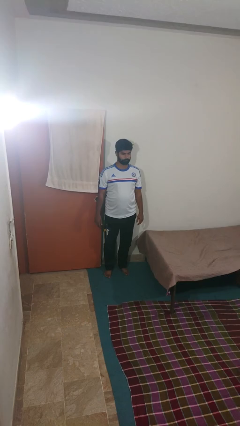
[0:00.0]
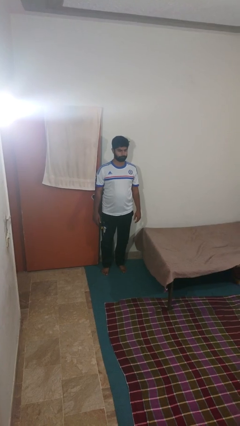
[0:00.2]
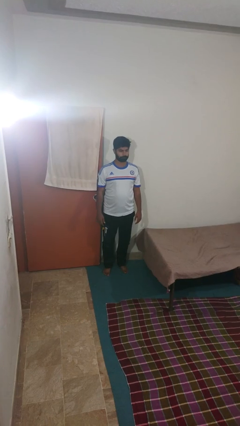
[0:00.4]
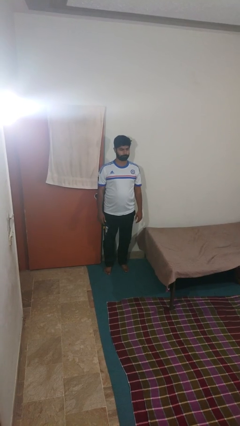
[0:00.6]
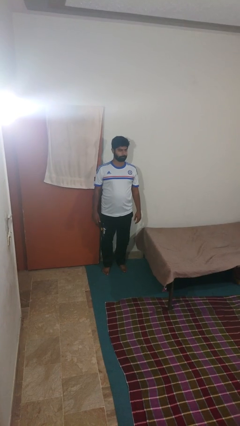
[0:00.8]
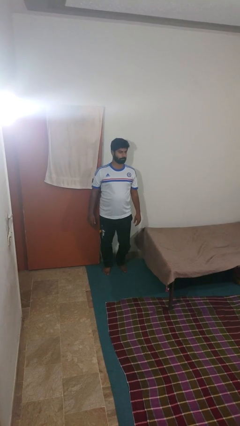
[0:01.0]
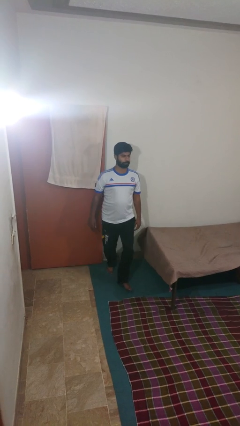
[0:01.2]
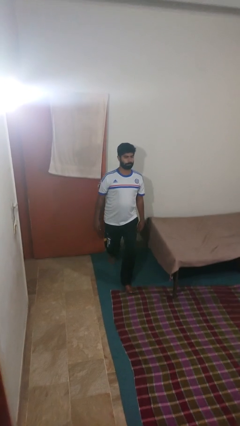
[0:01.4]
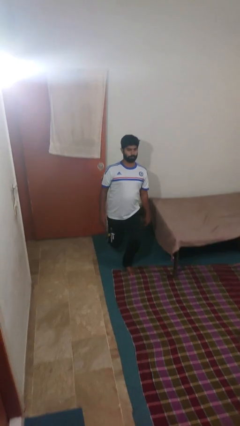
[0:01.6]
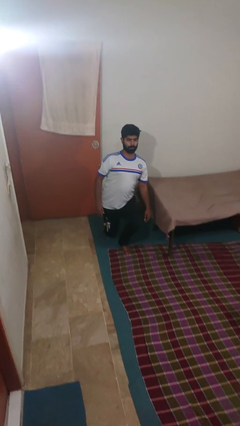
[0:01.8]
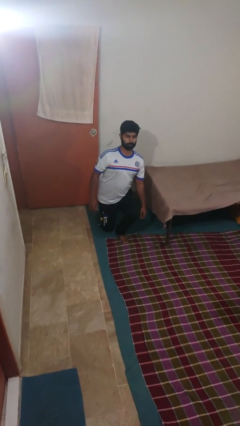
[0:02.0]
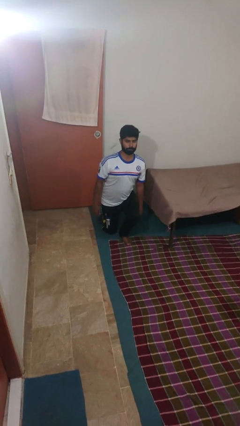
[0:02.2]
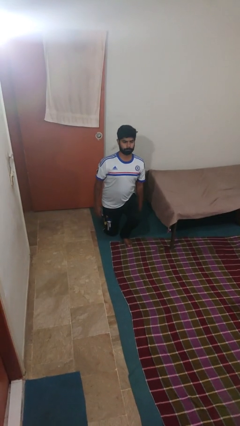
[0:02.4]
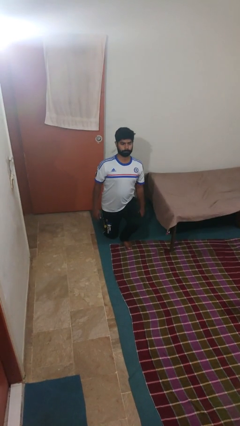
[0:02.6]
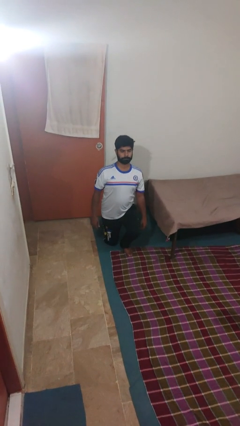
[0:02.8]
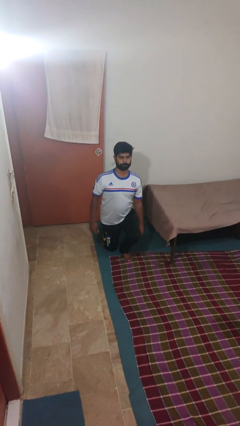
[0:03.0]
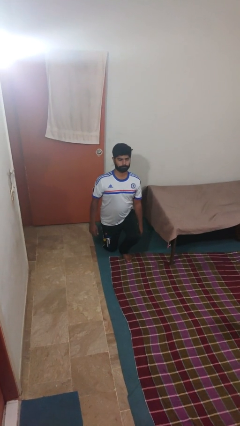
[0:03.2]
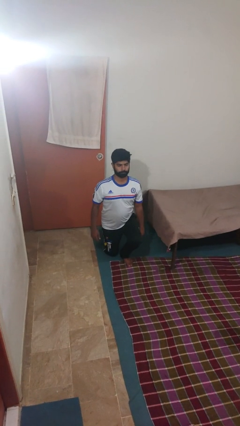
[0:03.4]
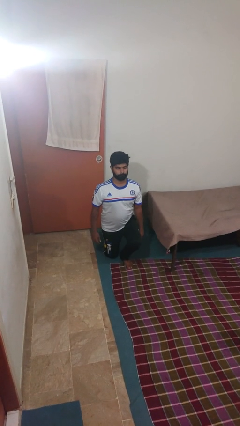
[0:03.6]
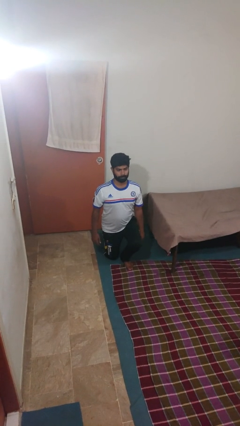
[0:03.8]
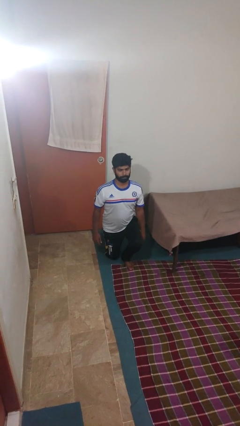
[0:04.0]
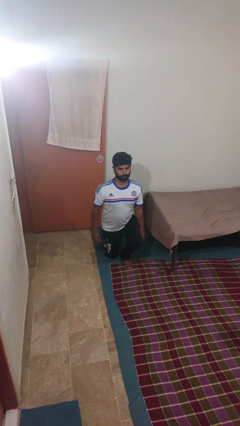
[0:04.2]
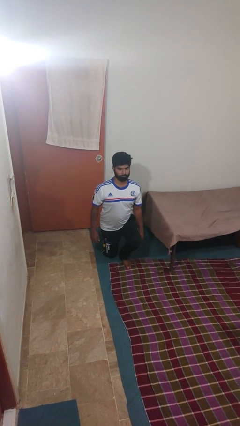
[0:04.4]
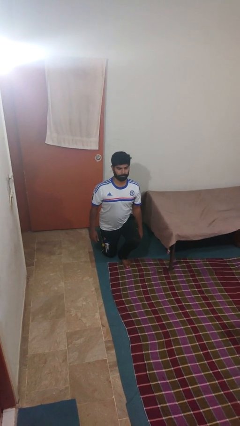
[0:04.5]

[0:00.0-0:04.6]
person kneels

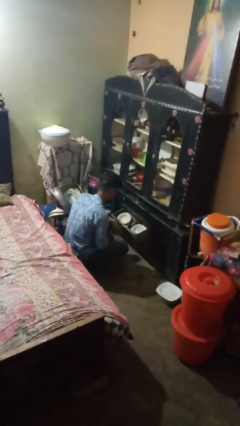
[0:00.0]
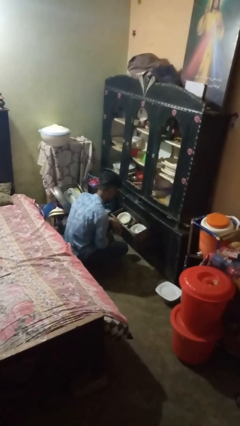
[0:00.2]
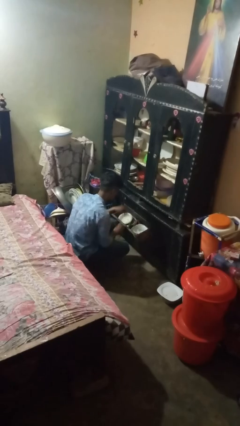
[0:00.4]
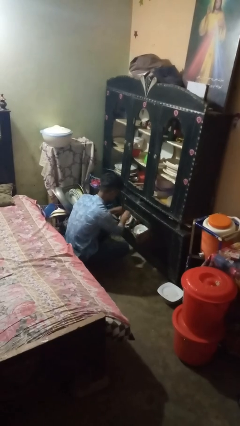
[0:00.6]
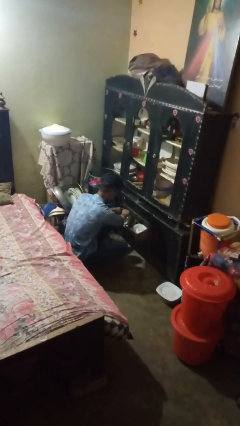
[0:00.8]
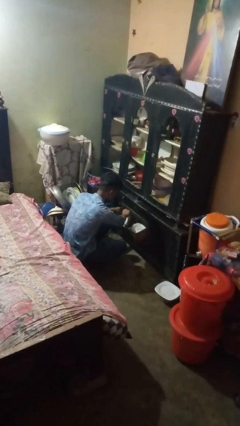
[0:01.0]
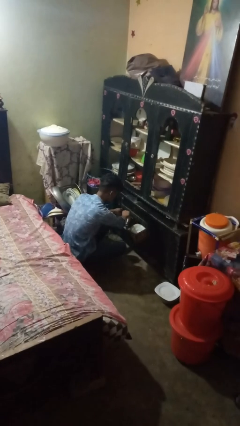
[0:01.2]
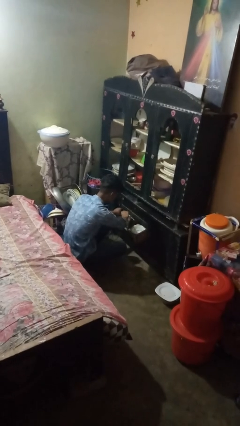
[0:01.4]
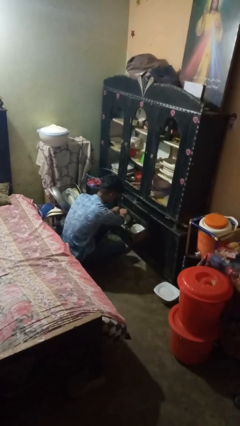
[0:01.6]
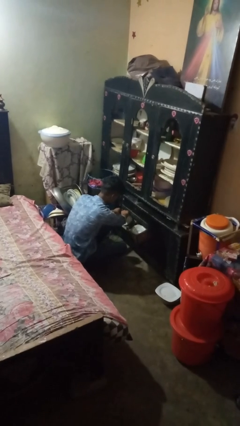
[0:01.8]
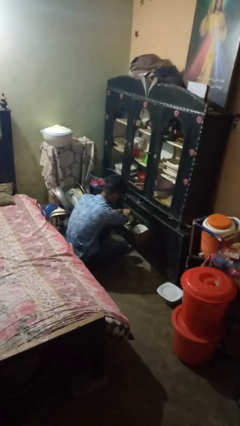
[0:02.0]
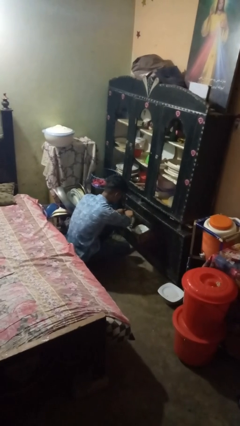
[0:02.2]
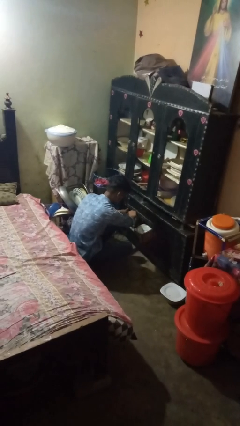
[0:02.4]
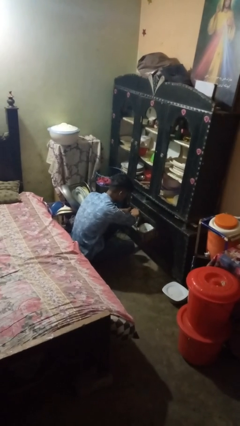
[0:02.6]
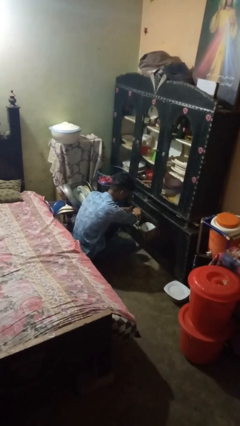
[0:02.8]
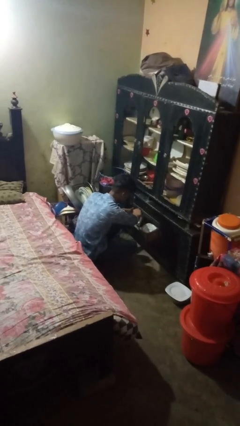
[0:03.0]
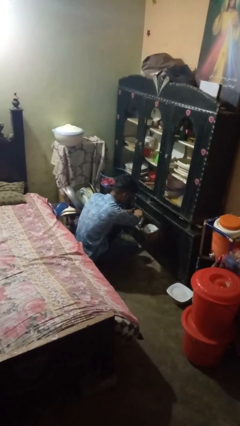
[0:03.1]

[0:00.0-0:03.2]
person searches in kitchen drawer

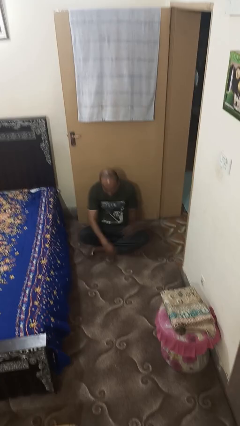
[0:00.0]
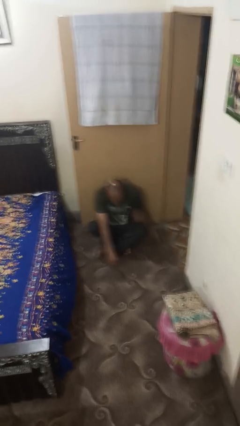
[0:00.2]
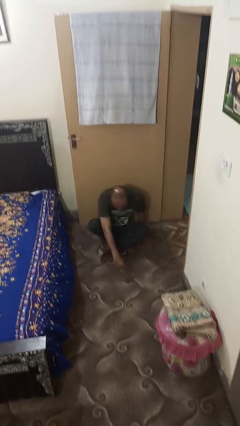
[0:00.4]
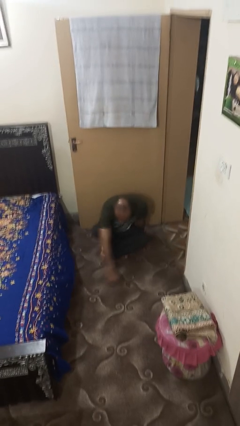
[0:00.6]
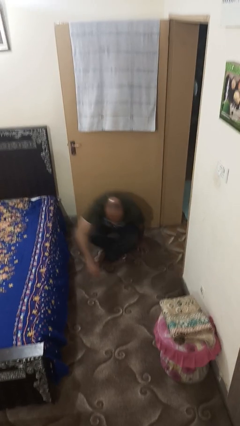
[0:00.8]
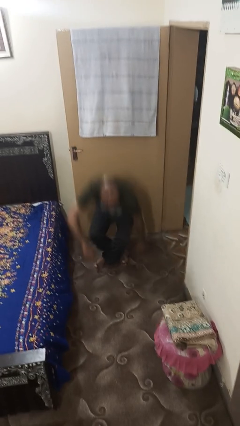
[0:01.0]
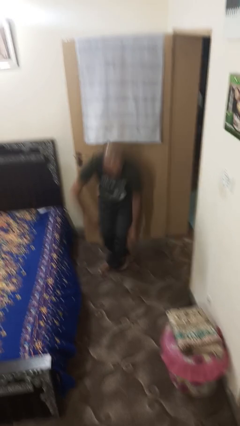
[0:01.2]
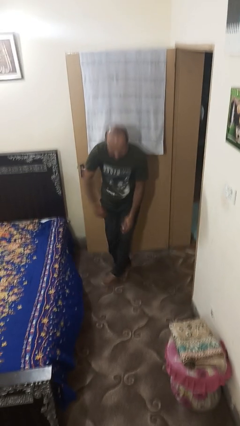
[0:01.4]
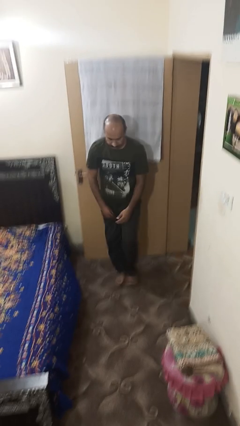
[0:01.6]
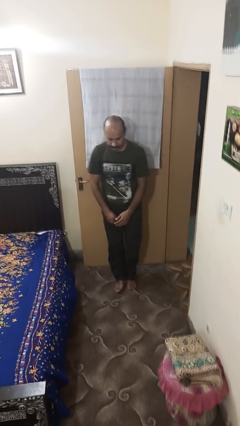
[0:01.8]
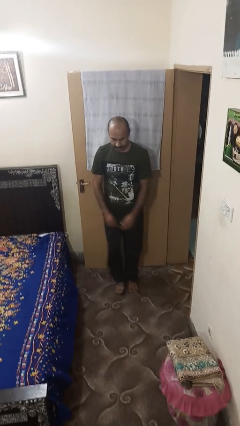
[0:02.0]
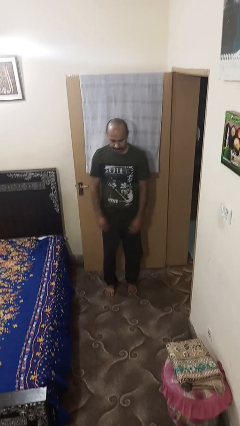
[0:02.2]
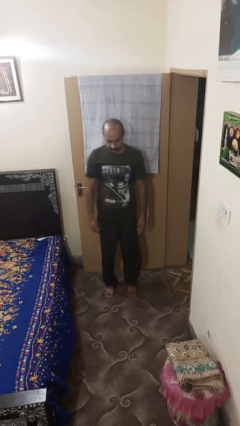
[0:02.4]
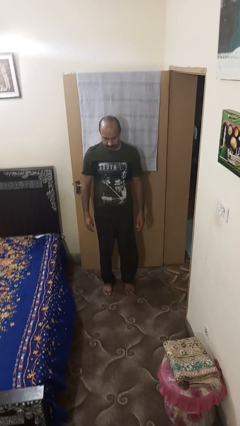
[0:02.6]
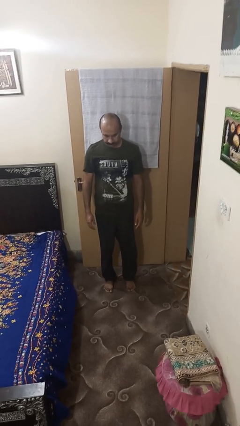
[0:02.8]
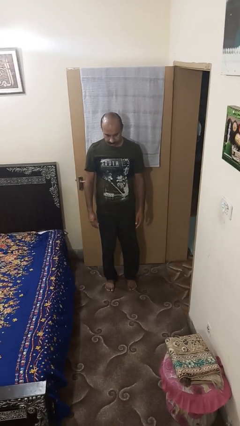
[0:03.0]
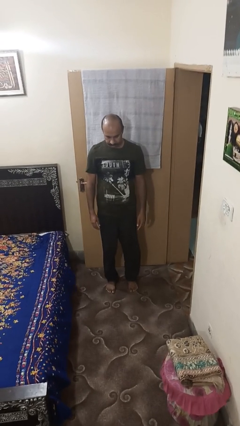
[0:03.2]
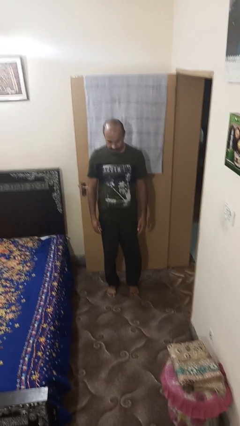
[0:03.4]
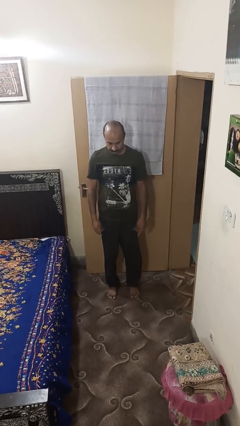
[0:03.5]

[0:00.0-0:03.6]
person stands up from floor

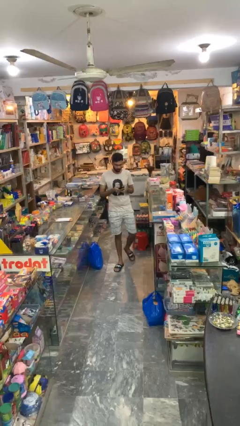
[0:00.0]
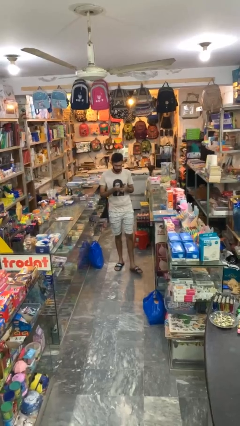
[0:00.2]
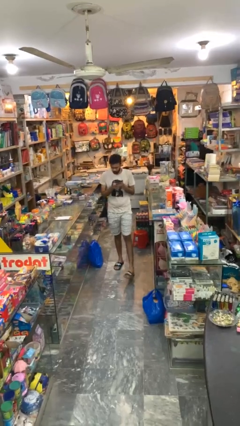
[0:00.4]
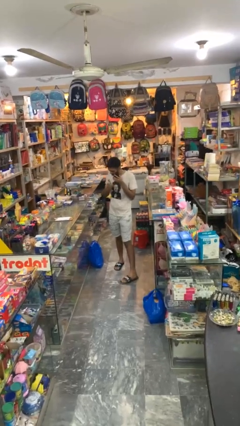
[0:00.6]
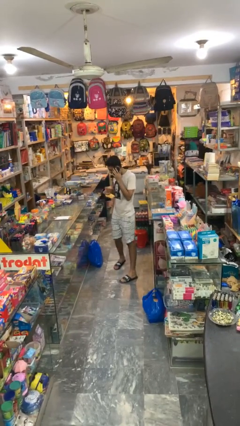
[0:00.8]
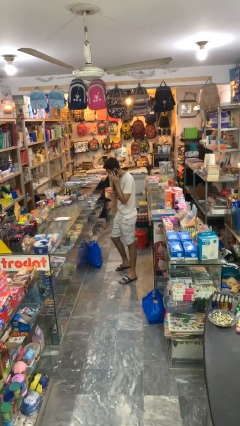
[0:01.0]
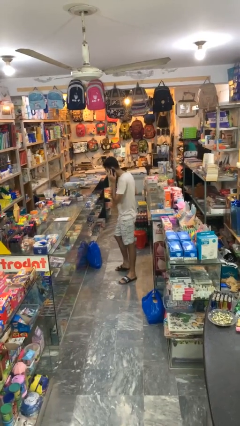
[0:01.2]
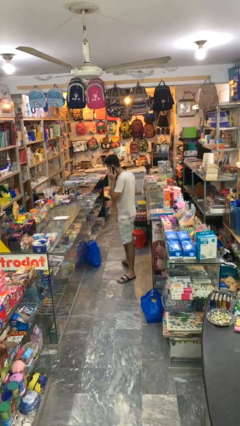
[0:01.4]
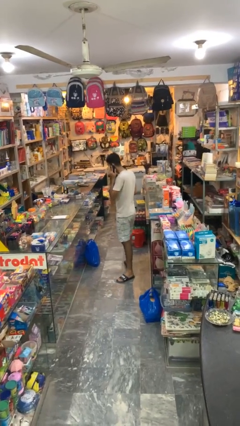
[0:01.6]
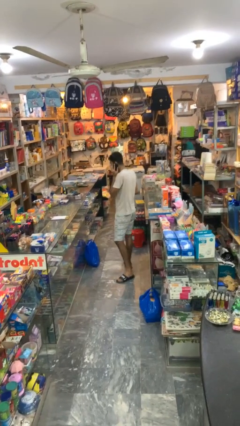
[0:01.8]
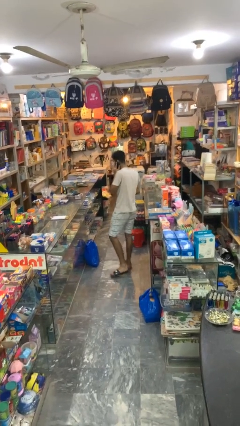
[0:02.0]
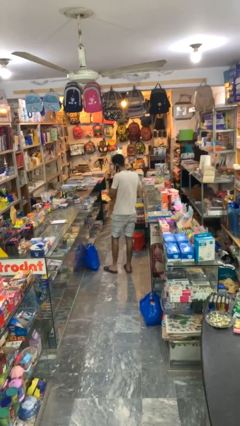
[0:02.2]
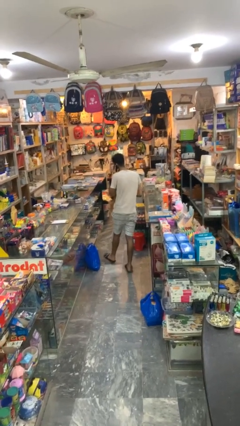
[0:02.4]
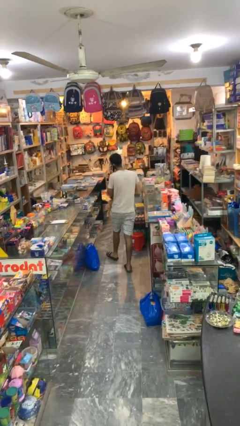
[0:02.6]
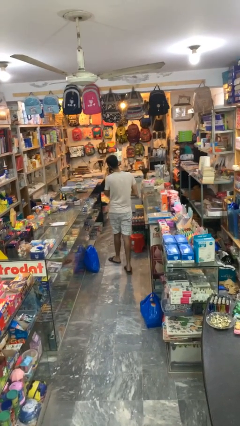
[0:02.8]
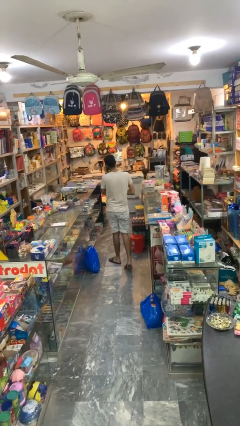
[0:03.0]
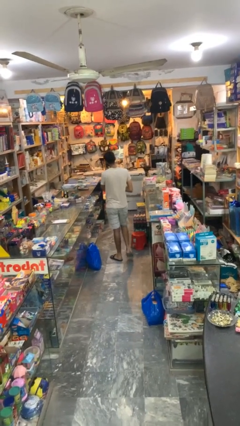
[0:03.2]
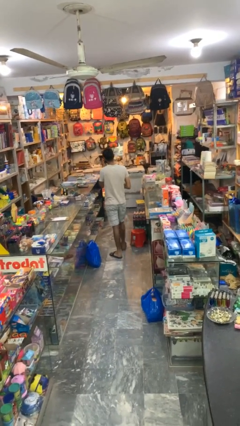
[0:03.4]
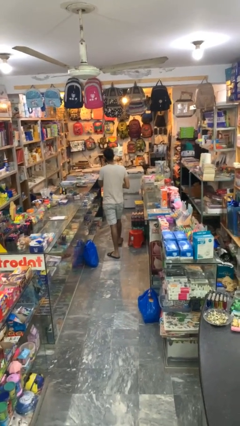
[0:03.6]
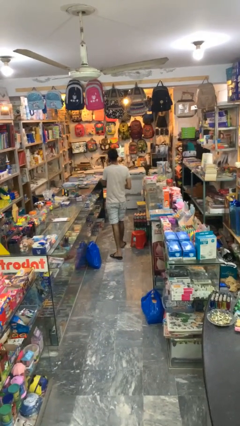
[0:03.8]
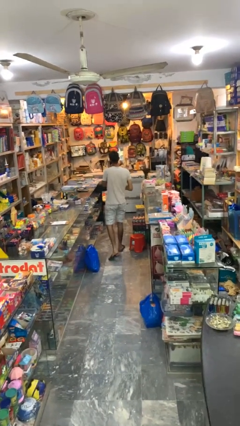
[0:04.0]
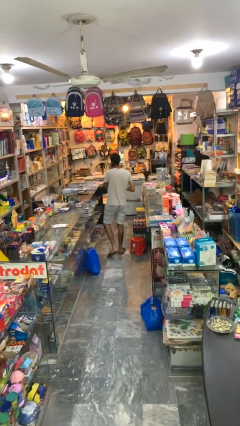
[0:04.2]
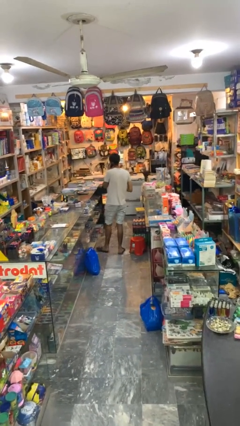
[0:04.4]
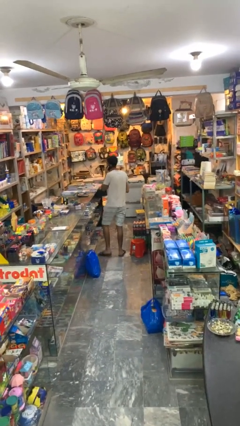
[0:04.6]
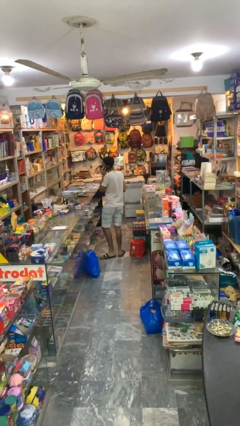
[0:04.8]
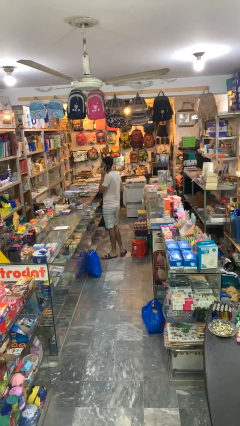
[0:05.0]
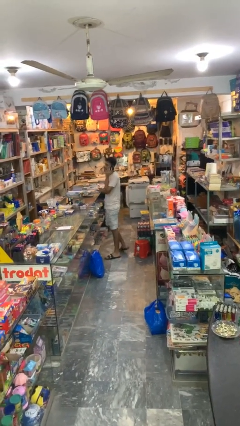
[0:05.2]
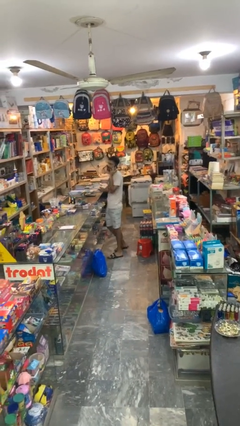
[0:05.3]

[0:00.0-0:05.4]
person talks on phone

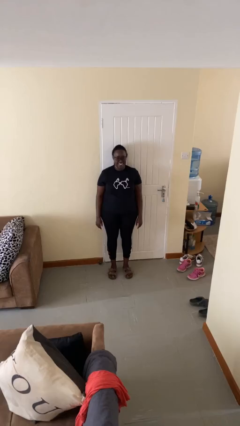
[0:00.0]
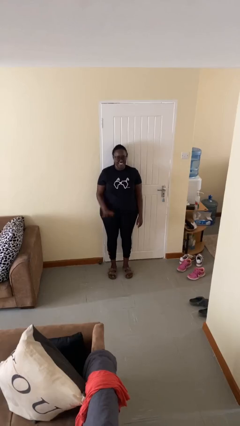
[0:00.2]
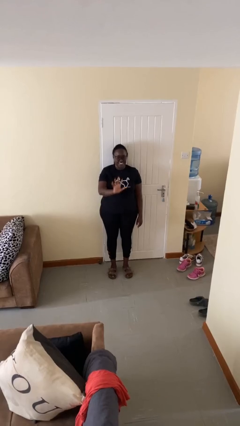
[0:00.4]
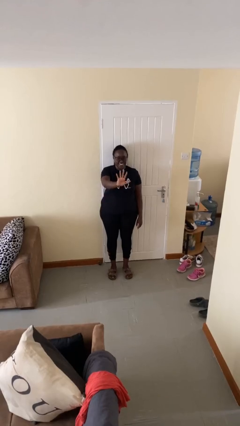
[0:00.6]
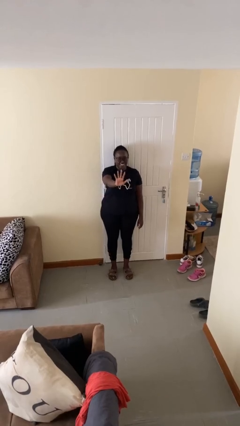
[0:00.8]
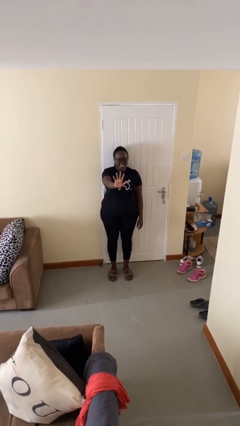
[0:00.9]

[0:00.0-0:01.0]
person gestures number five
